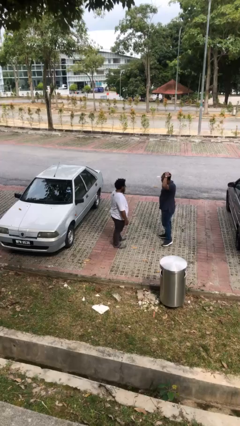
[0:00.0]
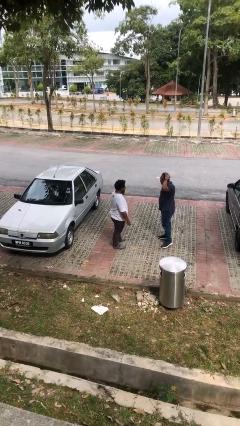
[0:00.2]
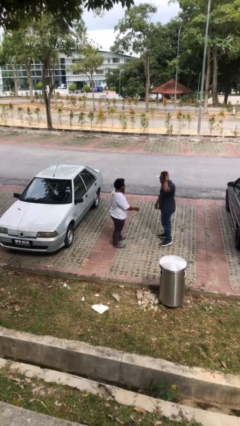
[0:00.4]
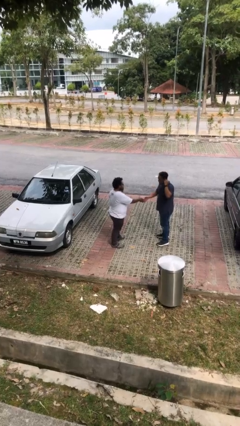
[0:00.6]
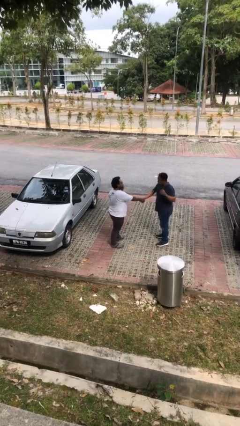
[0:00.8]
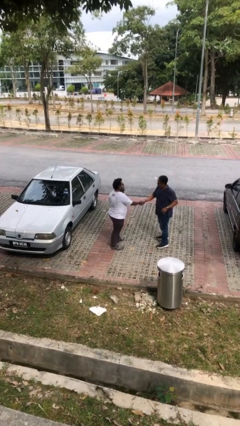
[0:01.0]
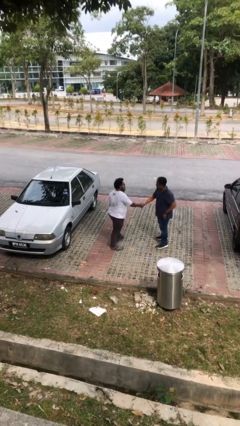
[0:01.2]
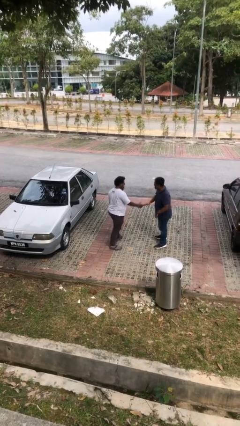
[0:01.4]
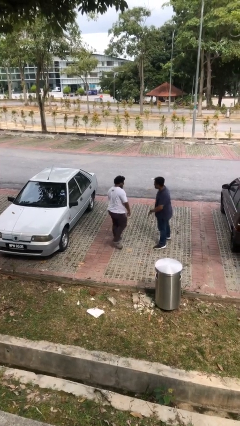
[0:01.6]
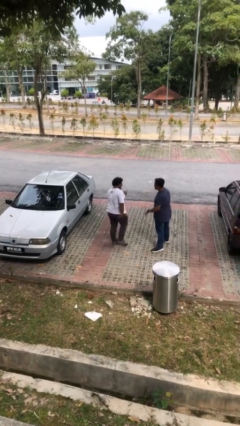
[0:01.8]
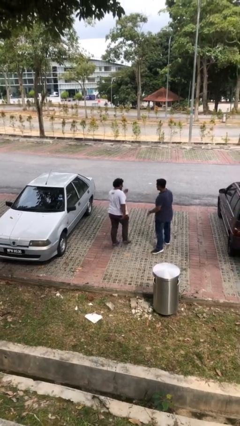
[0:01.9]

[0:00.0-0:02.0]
person shakes hand

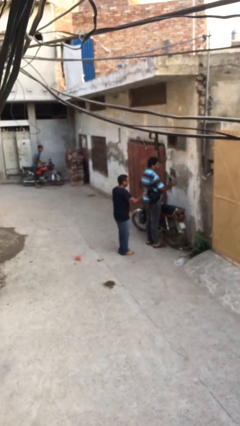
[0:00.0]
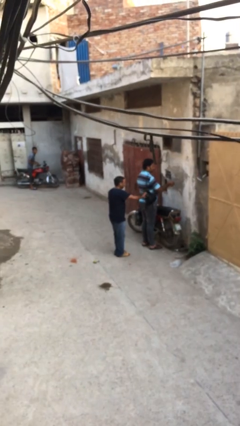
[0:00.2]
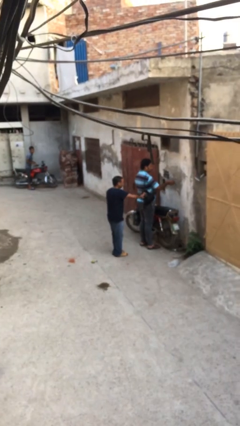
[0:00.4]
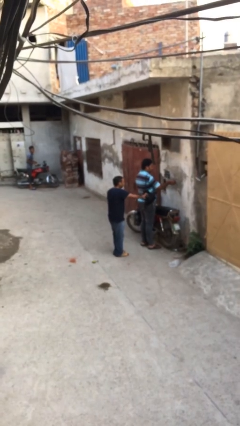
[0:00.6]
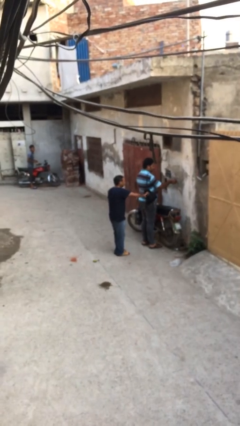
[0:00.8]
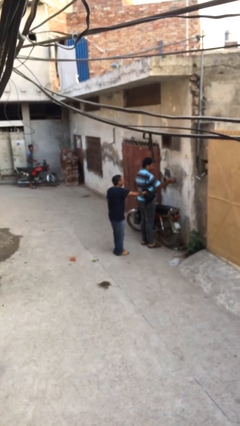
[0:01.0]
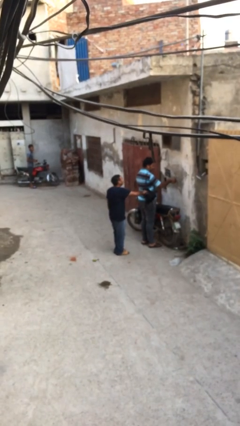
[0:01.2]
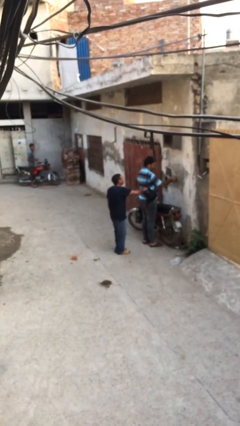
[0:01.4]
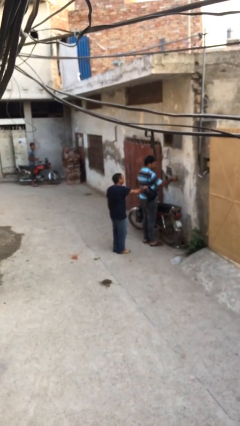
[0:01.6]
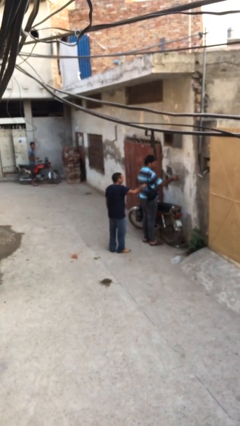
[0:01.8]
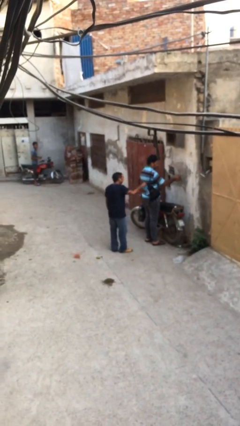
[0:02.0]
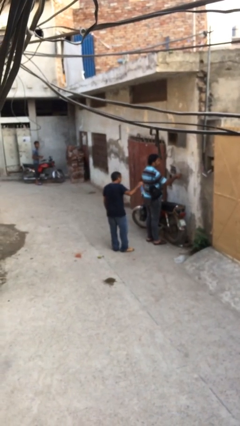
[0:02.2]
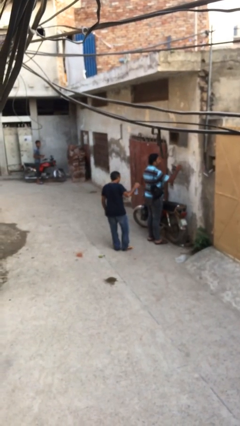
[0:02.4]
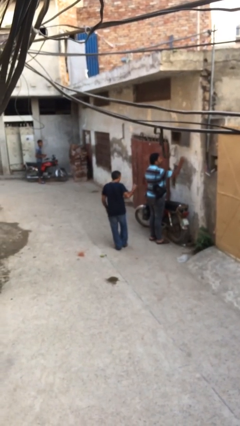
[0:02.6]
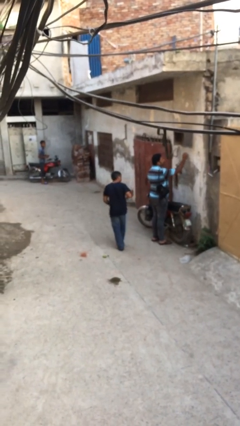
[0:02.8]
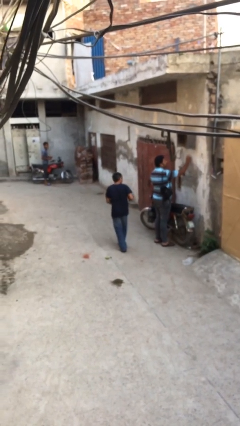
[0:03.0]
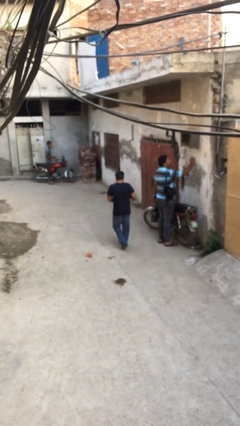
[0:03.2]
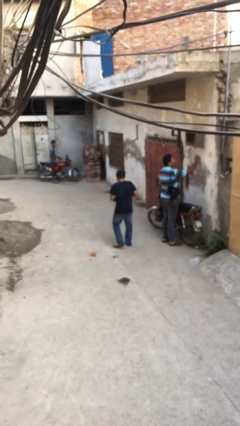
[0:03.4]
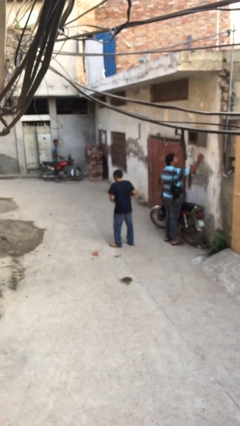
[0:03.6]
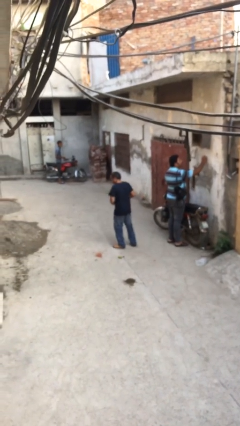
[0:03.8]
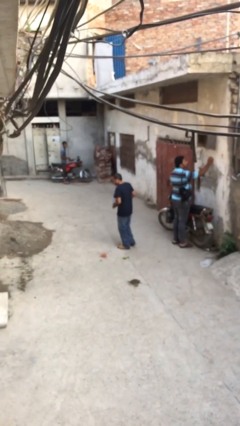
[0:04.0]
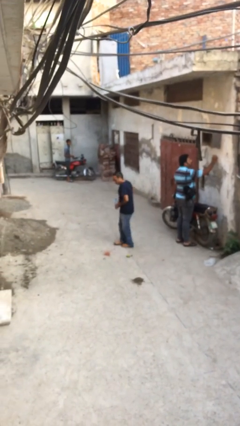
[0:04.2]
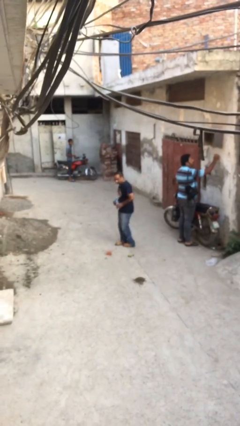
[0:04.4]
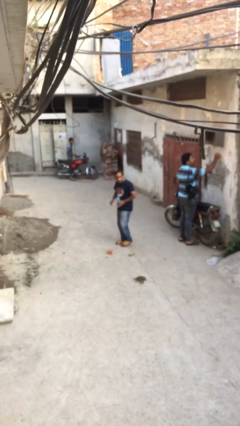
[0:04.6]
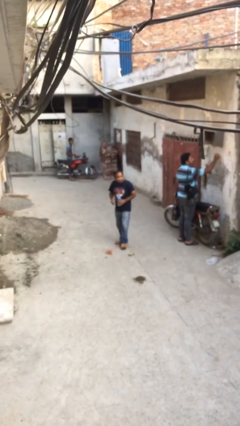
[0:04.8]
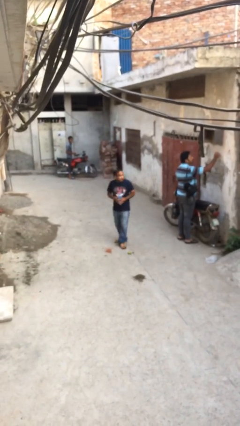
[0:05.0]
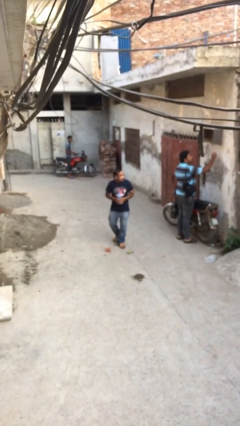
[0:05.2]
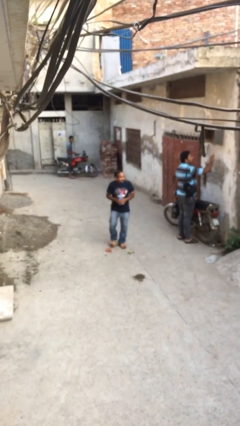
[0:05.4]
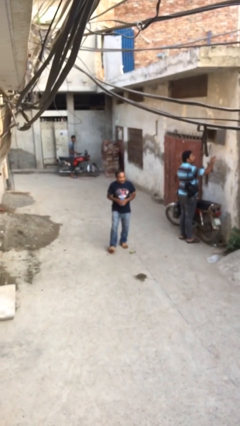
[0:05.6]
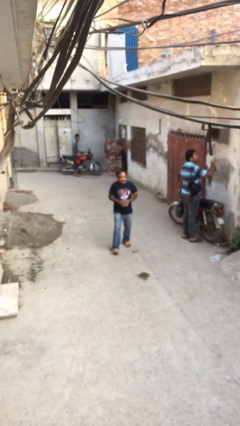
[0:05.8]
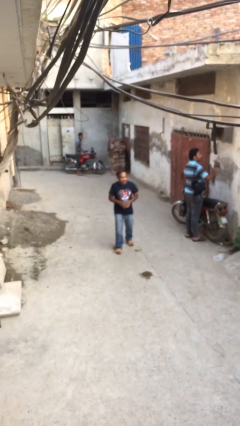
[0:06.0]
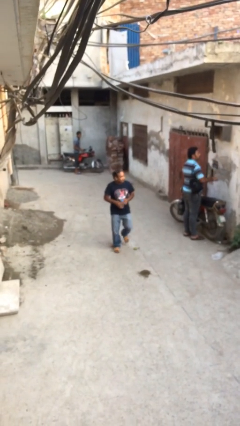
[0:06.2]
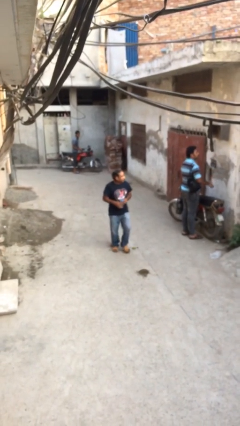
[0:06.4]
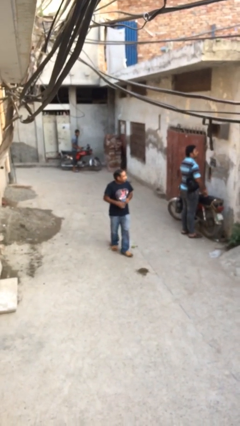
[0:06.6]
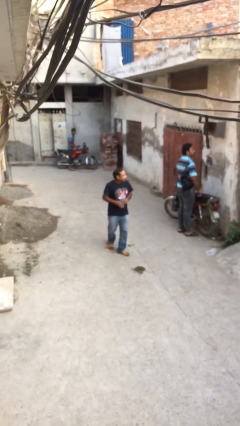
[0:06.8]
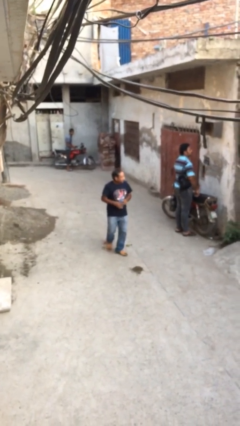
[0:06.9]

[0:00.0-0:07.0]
person steals object from person

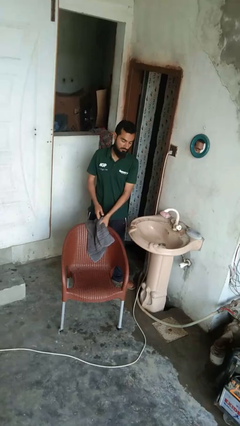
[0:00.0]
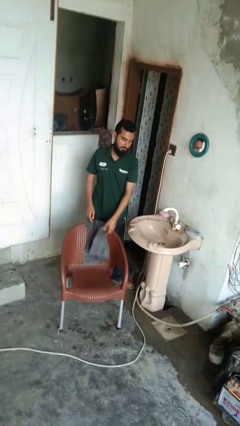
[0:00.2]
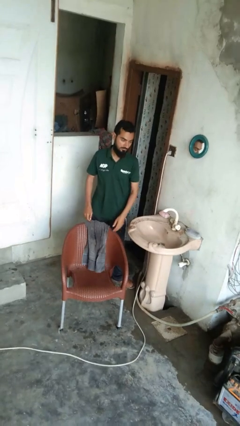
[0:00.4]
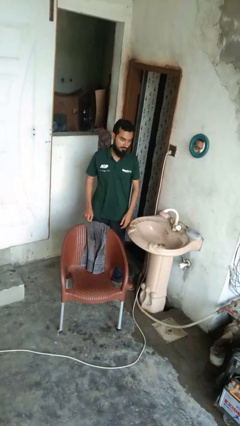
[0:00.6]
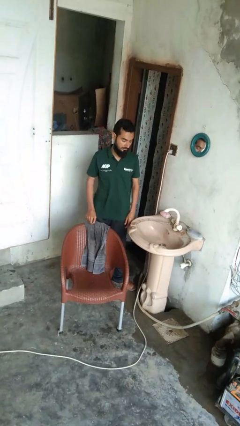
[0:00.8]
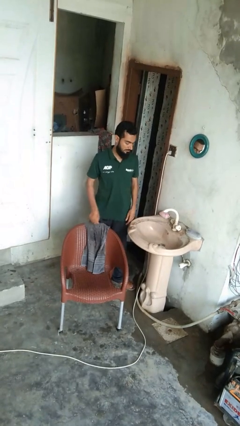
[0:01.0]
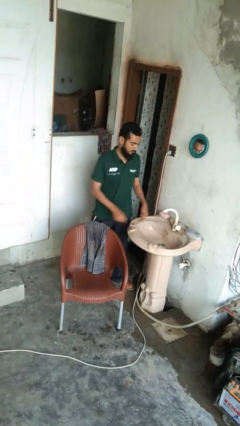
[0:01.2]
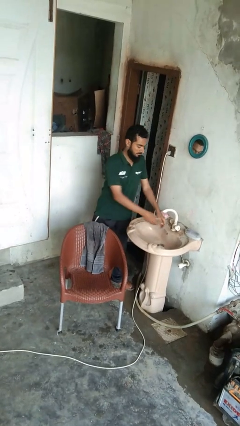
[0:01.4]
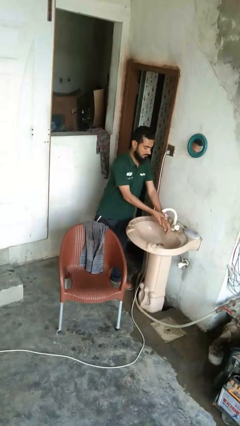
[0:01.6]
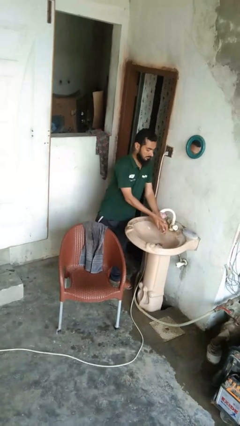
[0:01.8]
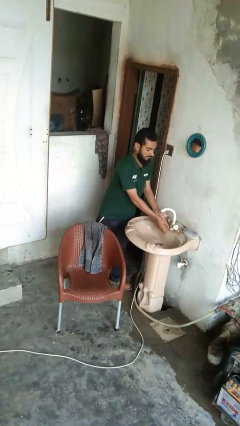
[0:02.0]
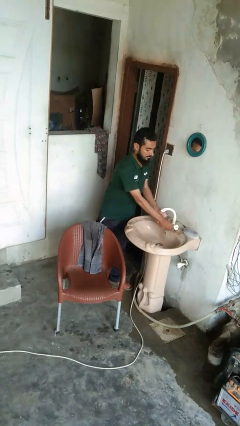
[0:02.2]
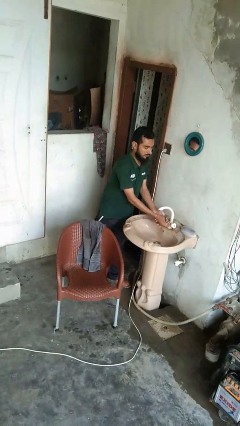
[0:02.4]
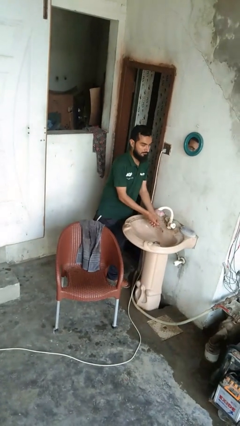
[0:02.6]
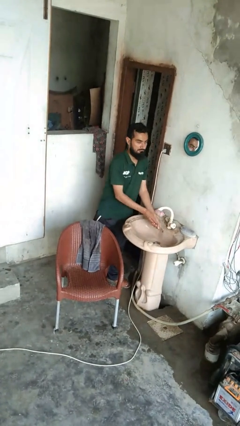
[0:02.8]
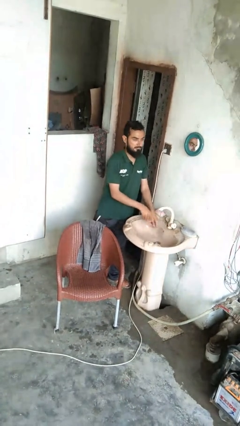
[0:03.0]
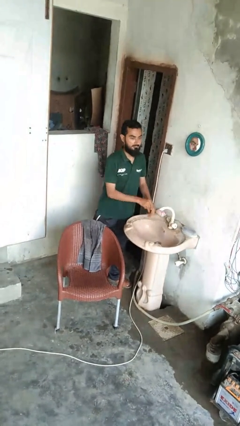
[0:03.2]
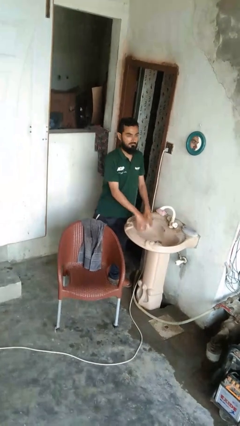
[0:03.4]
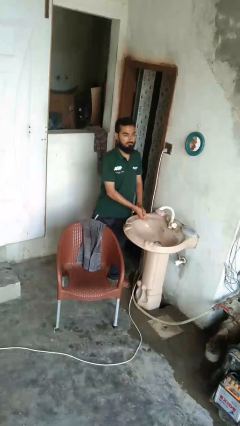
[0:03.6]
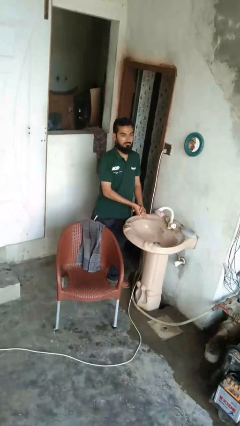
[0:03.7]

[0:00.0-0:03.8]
person washes hands

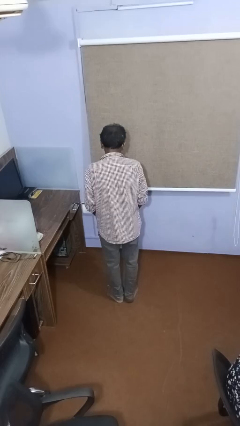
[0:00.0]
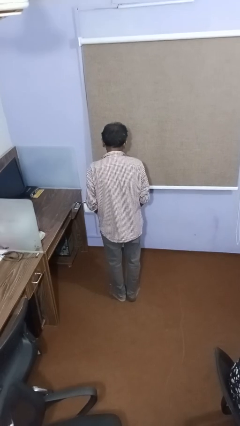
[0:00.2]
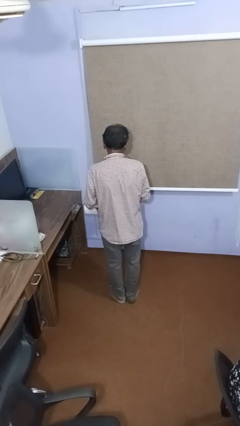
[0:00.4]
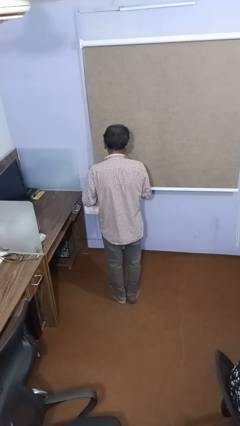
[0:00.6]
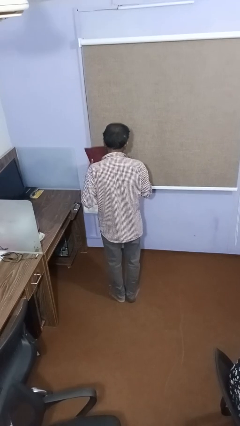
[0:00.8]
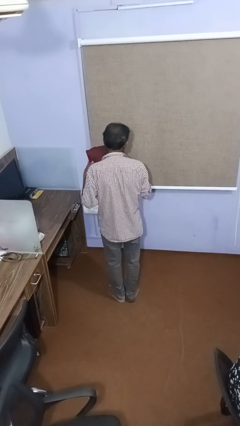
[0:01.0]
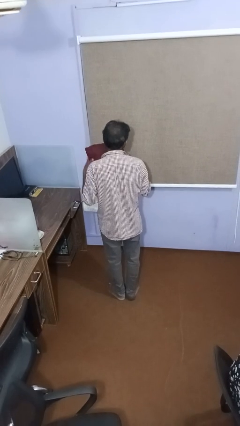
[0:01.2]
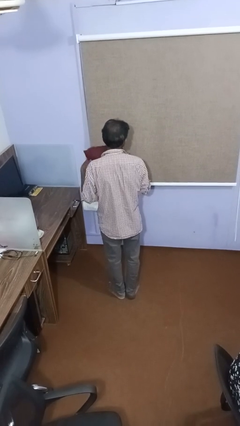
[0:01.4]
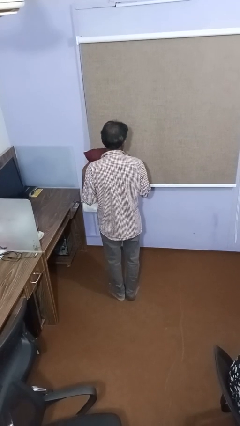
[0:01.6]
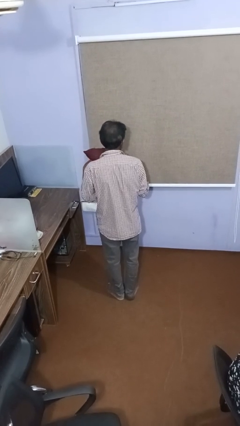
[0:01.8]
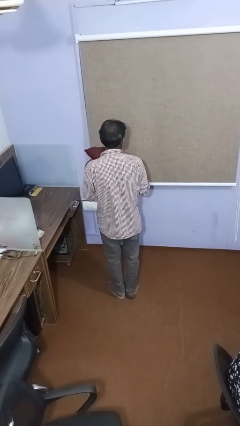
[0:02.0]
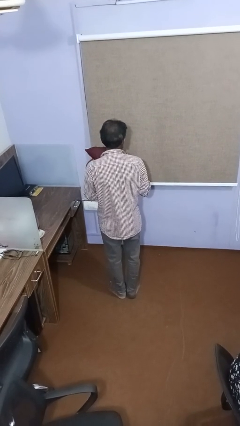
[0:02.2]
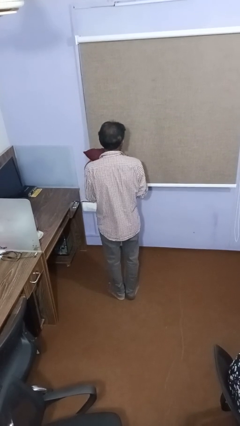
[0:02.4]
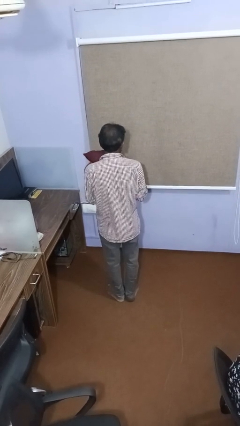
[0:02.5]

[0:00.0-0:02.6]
person hugs stuffed animal

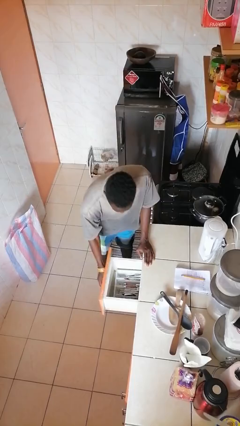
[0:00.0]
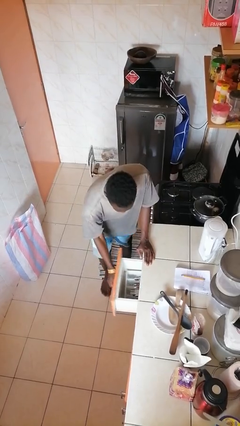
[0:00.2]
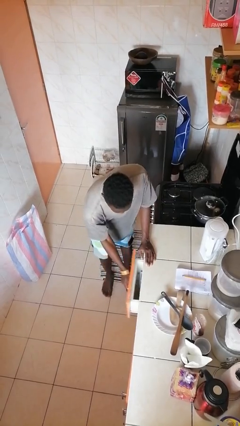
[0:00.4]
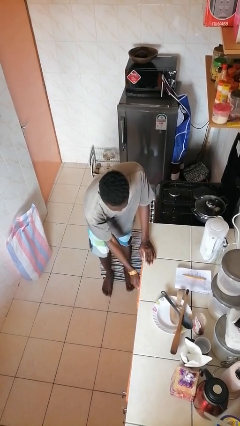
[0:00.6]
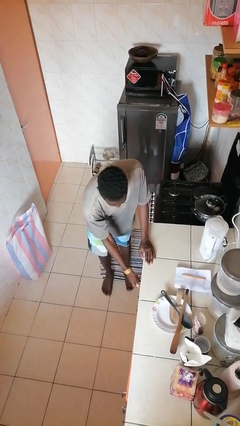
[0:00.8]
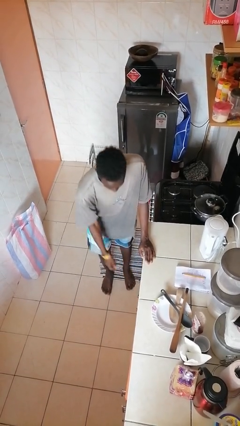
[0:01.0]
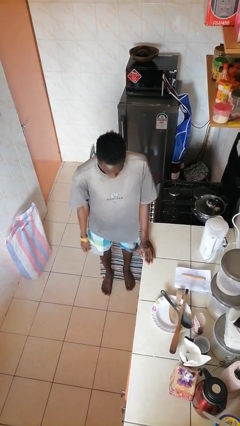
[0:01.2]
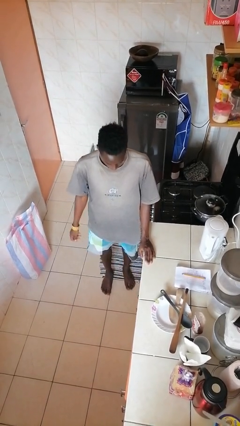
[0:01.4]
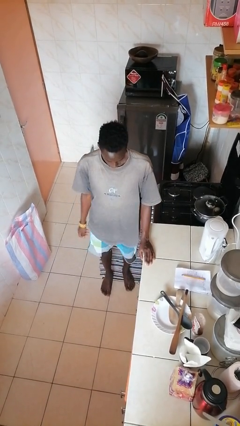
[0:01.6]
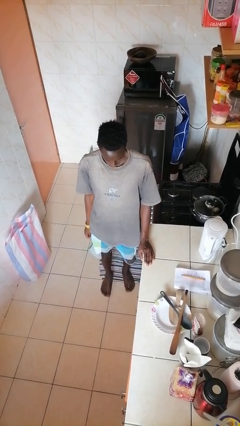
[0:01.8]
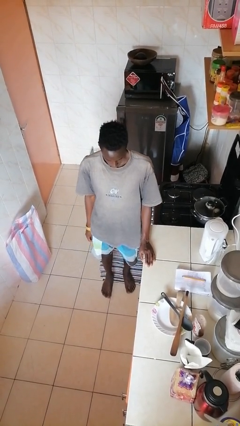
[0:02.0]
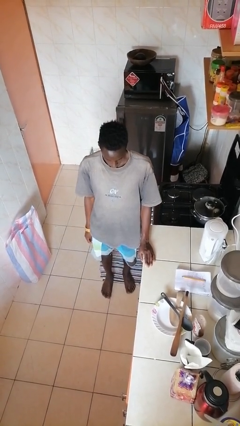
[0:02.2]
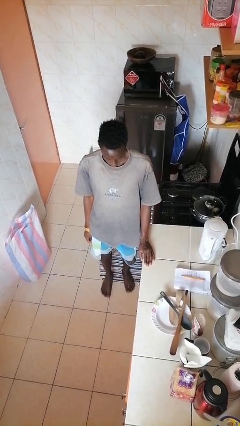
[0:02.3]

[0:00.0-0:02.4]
person closes kitchen drawer
